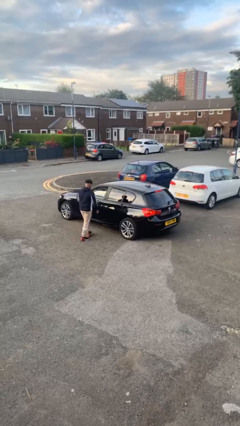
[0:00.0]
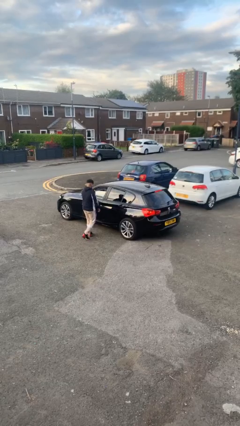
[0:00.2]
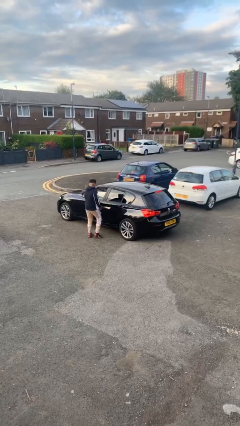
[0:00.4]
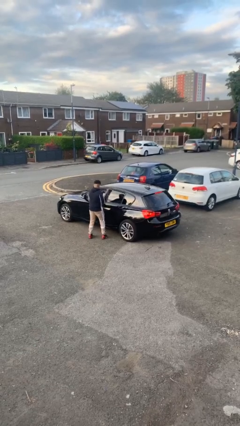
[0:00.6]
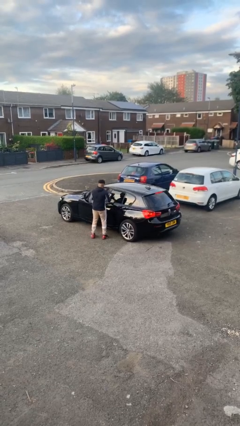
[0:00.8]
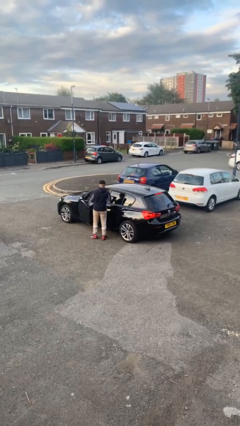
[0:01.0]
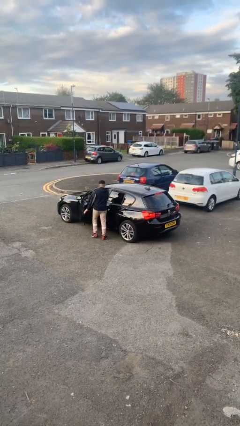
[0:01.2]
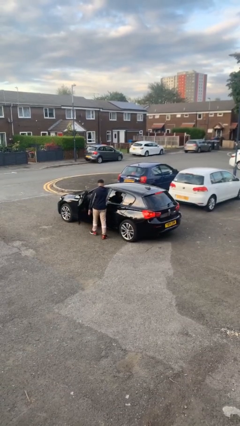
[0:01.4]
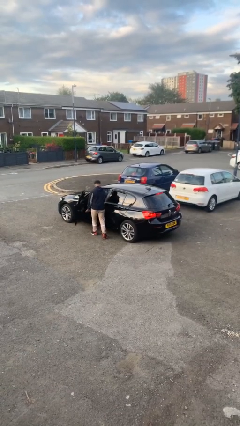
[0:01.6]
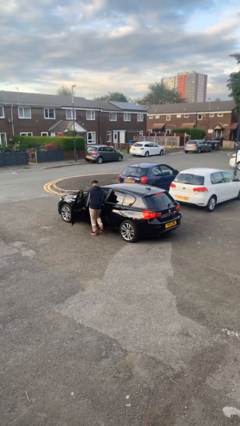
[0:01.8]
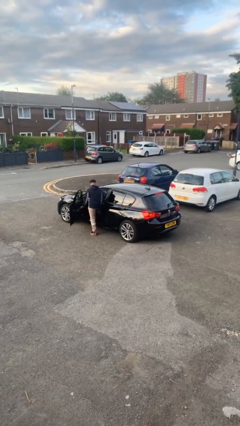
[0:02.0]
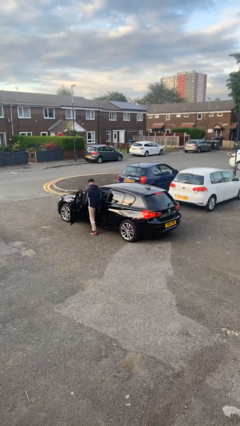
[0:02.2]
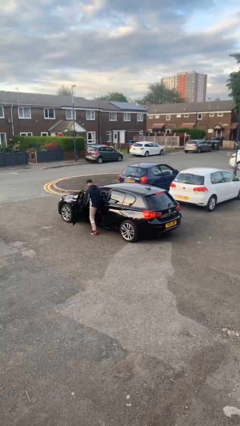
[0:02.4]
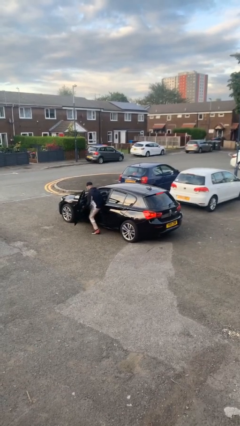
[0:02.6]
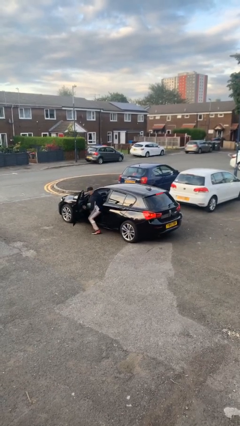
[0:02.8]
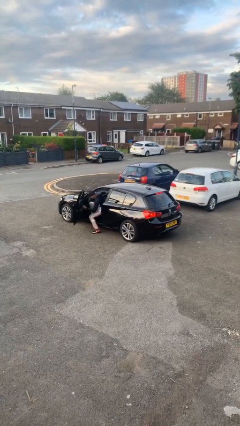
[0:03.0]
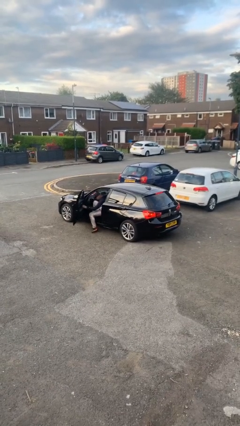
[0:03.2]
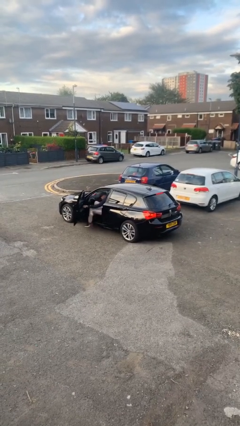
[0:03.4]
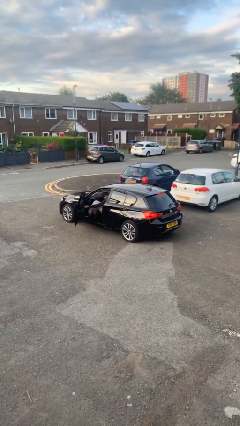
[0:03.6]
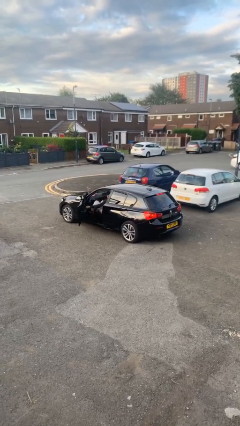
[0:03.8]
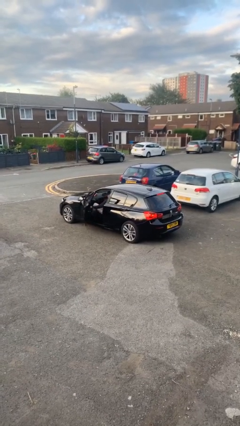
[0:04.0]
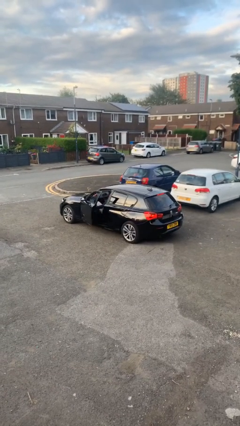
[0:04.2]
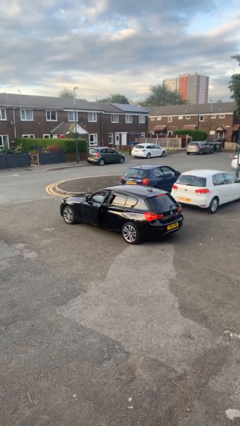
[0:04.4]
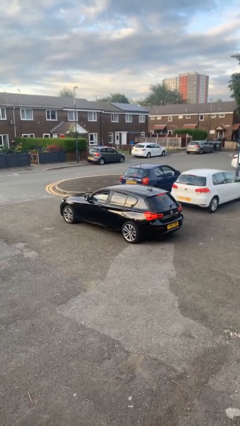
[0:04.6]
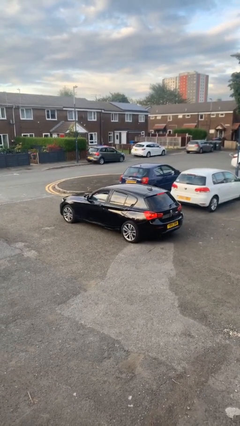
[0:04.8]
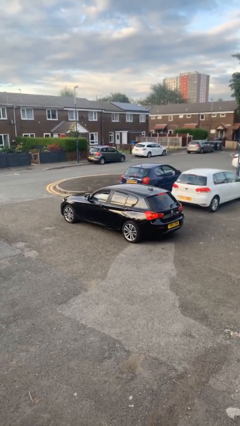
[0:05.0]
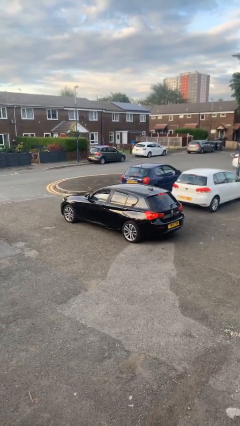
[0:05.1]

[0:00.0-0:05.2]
car picks up person

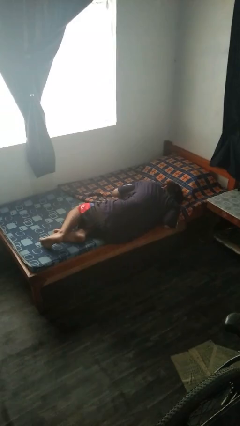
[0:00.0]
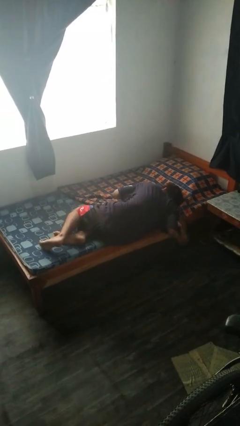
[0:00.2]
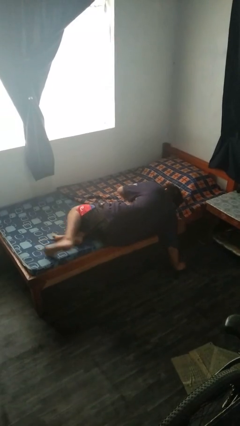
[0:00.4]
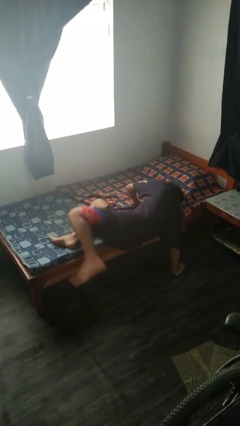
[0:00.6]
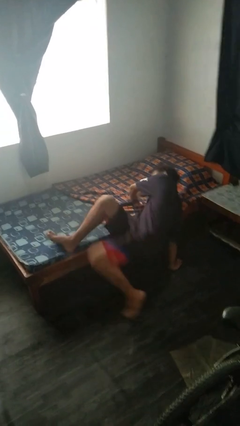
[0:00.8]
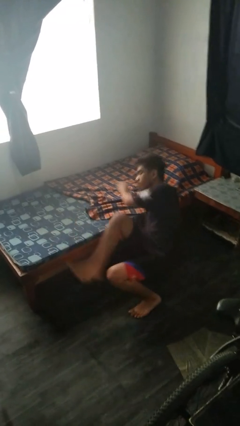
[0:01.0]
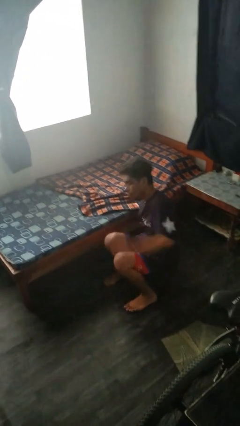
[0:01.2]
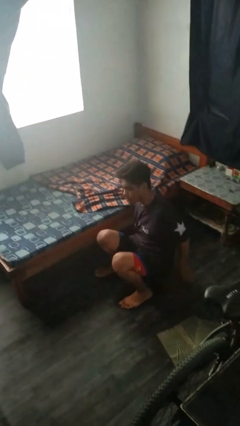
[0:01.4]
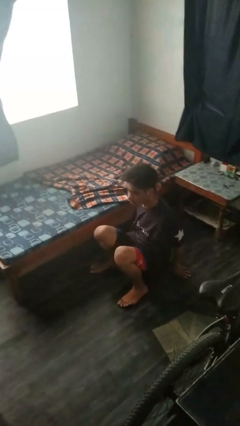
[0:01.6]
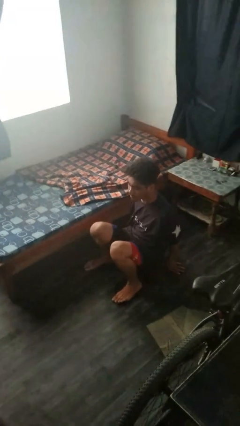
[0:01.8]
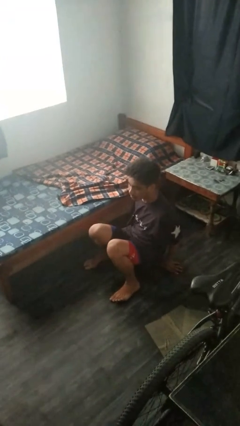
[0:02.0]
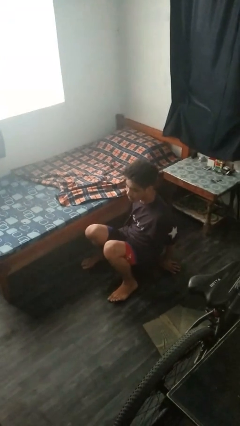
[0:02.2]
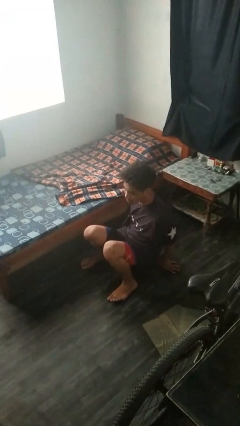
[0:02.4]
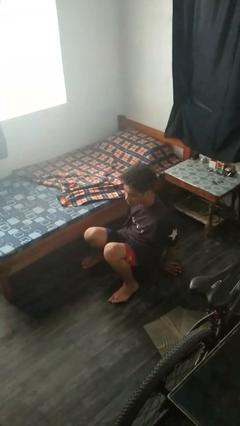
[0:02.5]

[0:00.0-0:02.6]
person falls from bed

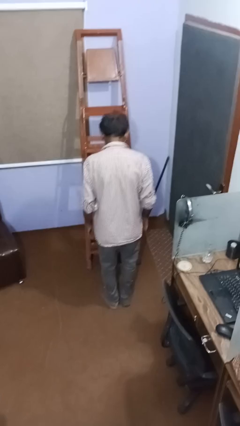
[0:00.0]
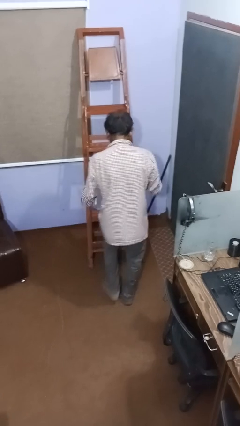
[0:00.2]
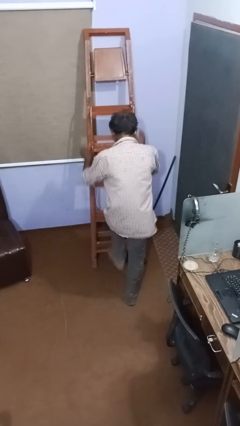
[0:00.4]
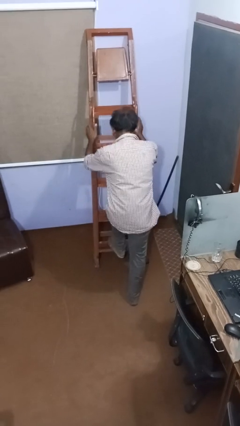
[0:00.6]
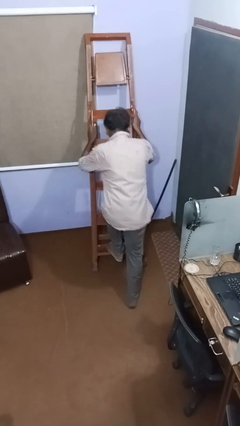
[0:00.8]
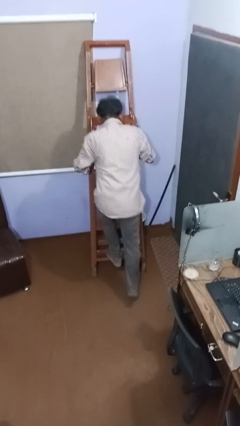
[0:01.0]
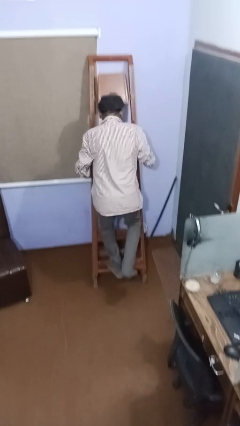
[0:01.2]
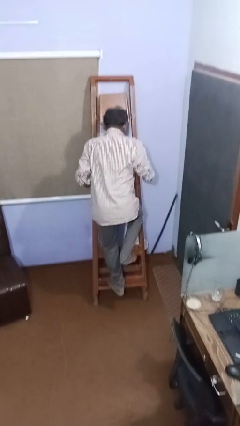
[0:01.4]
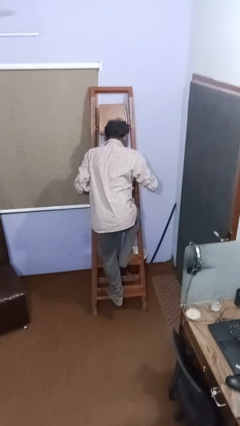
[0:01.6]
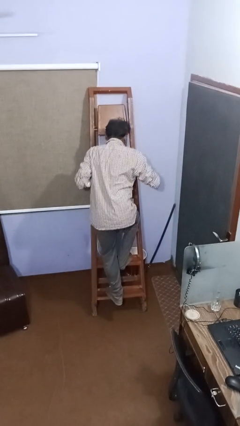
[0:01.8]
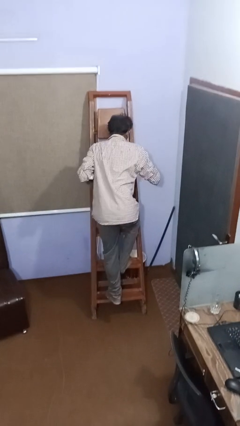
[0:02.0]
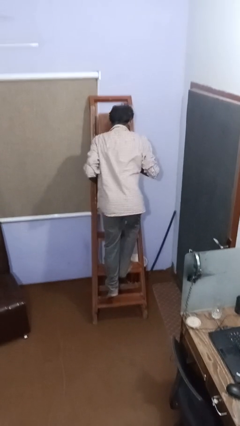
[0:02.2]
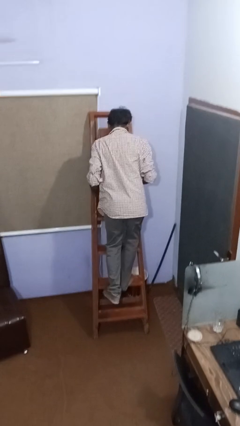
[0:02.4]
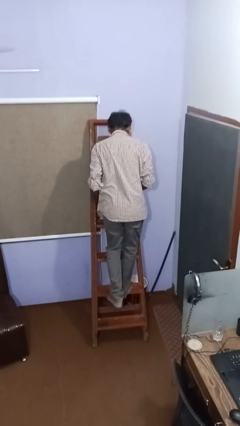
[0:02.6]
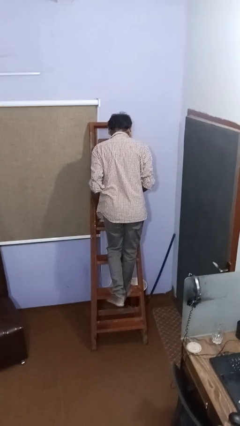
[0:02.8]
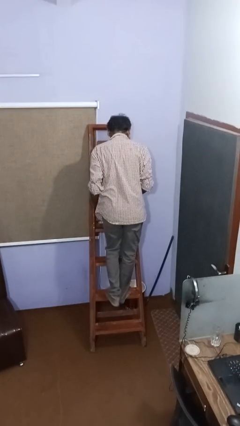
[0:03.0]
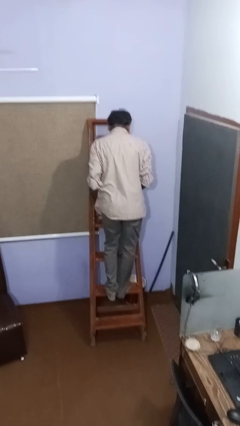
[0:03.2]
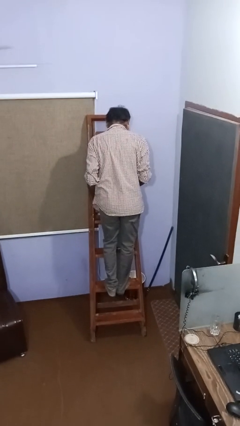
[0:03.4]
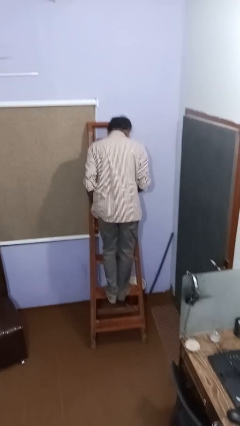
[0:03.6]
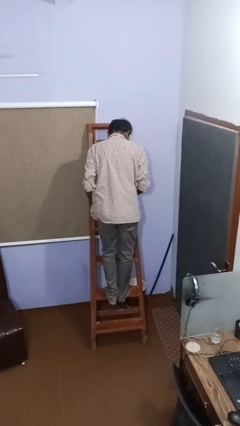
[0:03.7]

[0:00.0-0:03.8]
person climbs up ladder

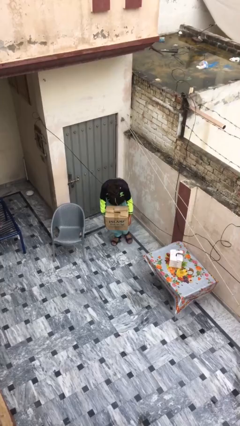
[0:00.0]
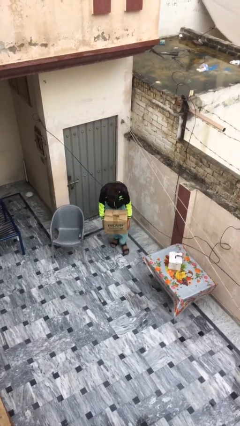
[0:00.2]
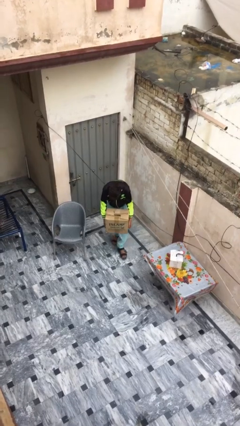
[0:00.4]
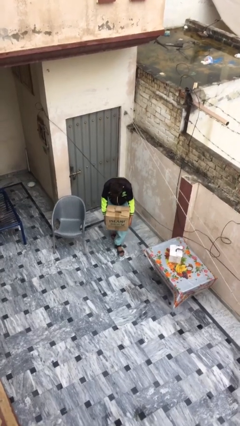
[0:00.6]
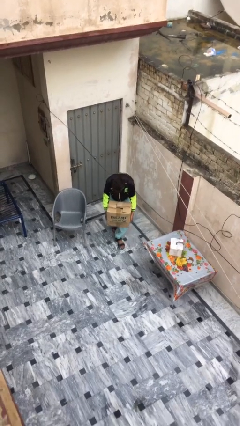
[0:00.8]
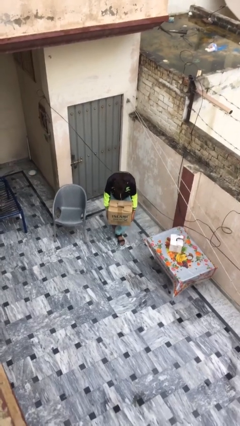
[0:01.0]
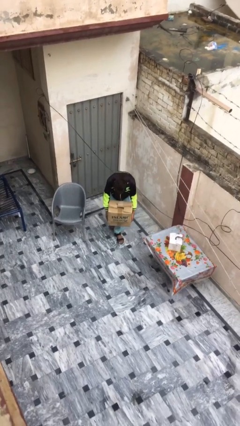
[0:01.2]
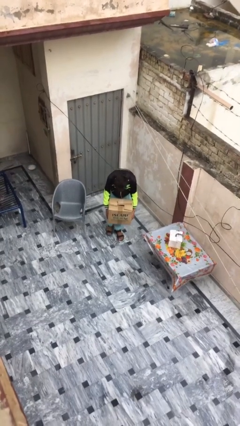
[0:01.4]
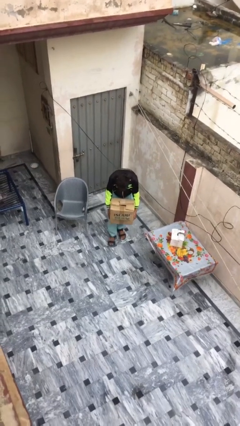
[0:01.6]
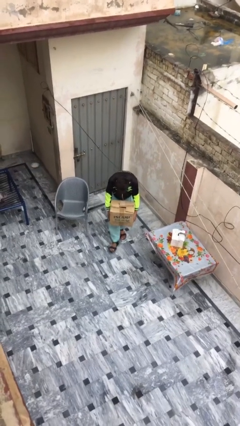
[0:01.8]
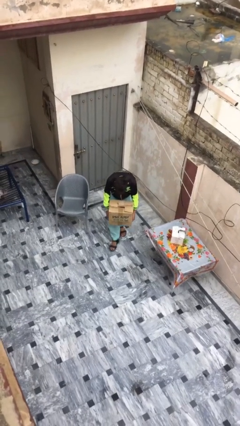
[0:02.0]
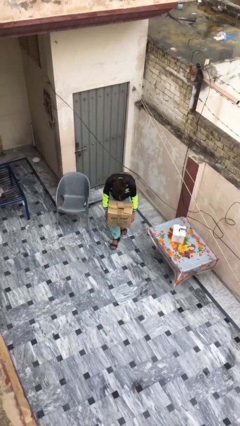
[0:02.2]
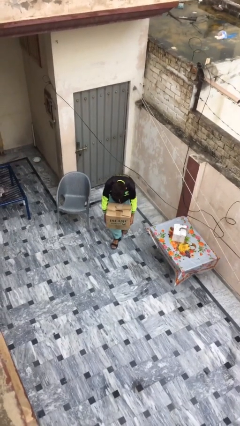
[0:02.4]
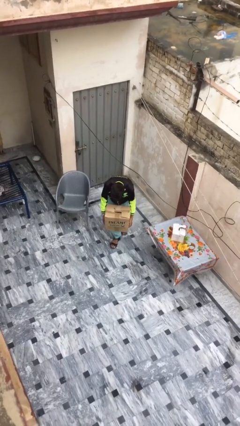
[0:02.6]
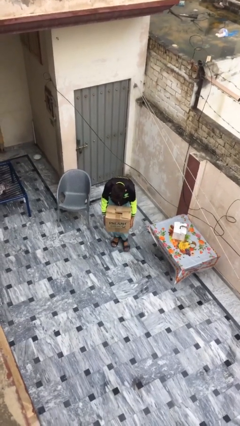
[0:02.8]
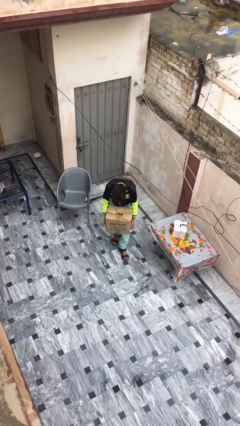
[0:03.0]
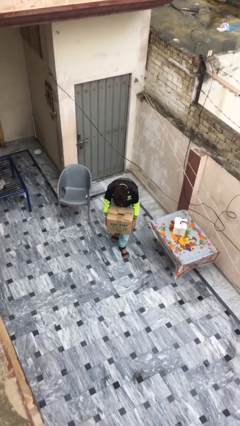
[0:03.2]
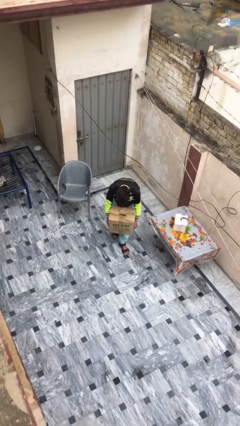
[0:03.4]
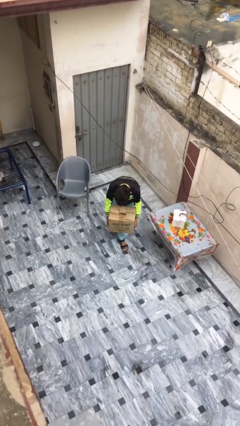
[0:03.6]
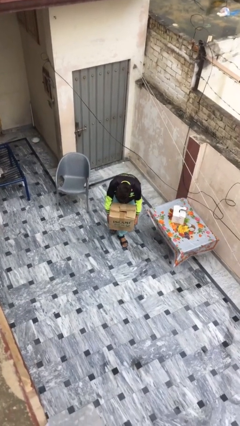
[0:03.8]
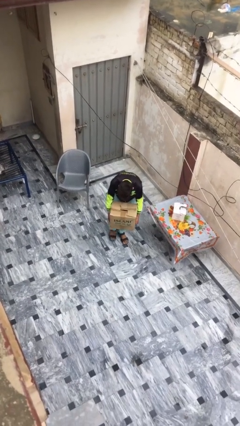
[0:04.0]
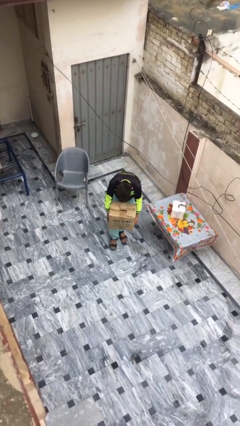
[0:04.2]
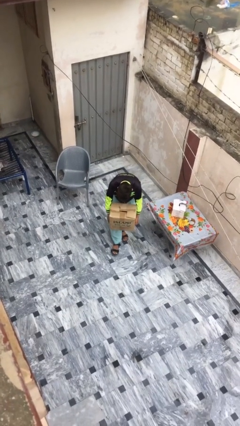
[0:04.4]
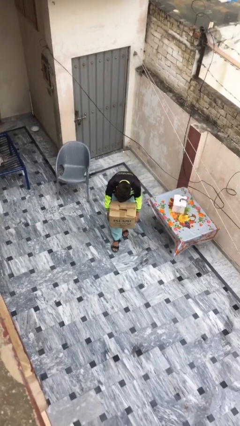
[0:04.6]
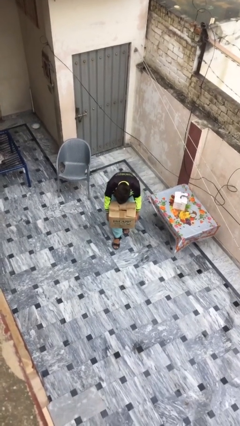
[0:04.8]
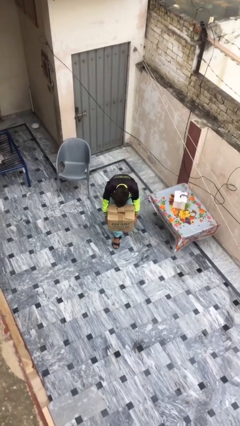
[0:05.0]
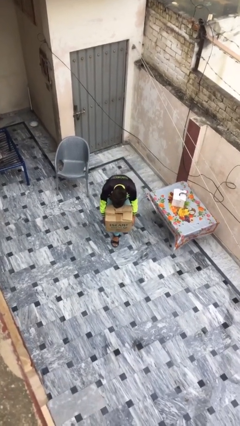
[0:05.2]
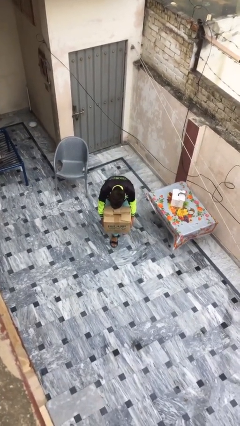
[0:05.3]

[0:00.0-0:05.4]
person carries heavy object

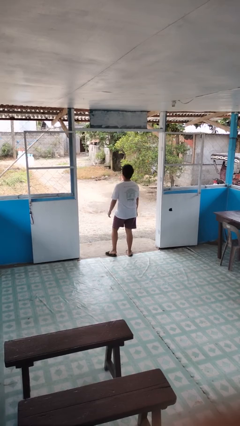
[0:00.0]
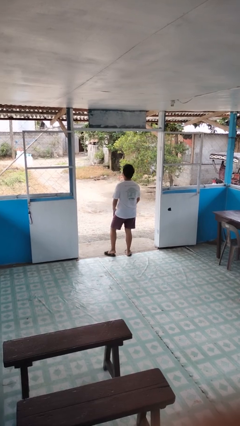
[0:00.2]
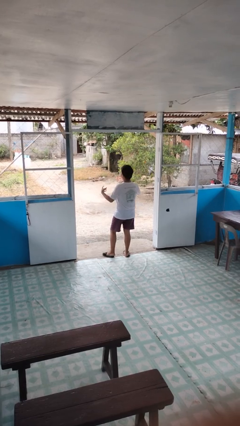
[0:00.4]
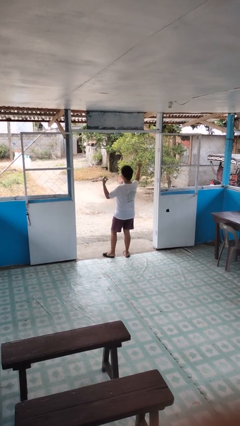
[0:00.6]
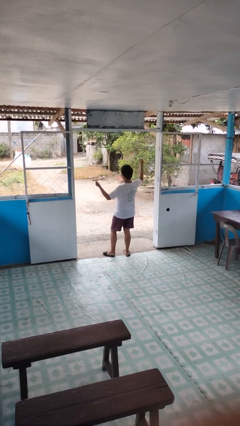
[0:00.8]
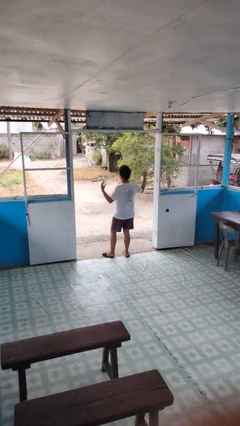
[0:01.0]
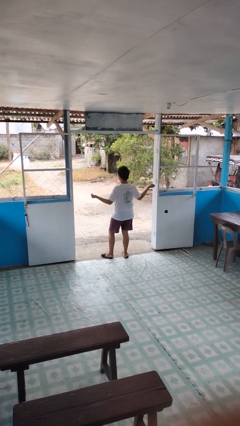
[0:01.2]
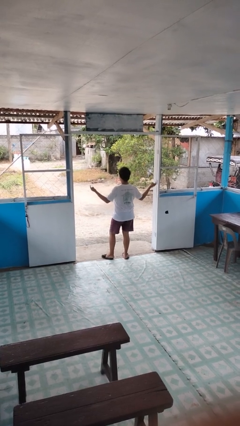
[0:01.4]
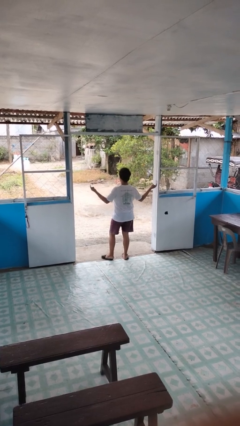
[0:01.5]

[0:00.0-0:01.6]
person snaps fingers
